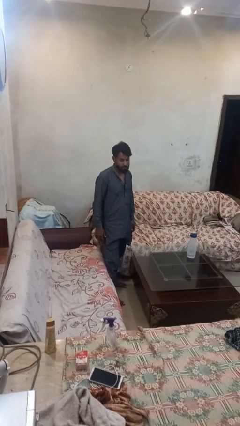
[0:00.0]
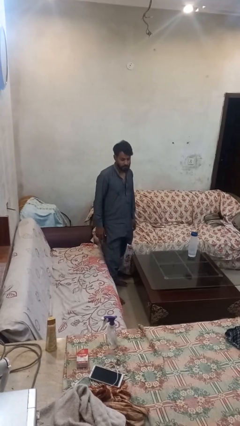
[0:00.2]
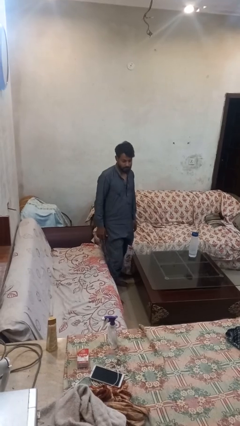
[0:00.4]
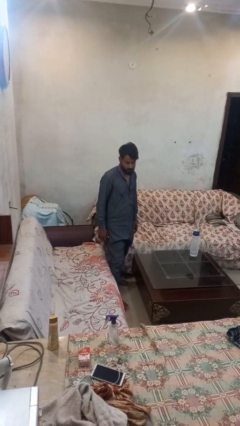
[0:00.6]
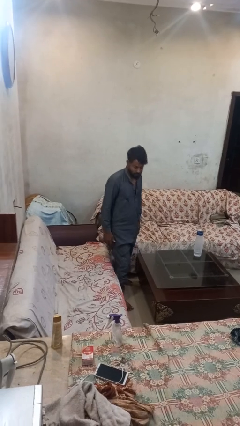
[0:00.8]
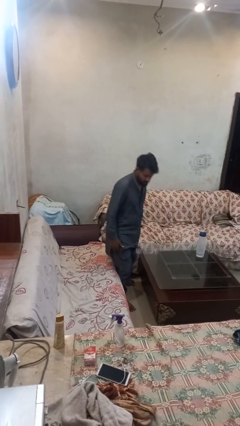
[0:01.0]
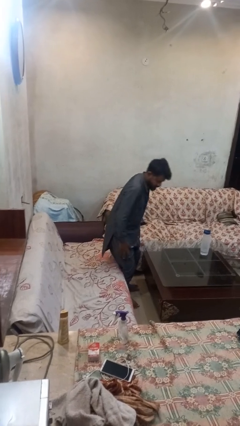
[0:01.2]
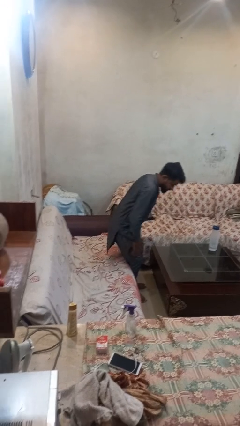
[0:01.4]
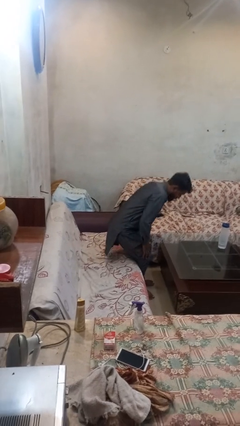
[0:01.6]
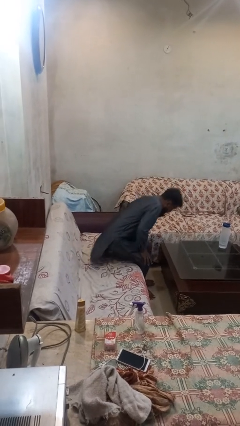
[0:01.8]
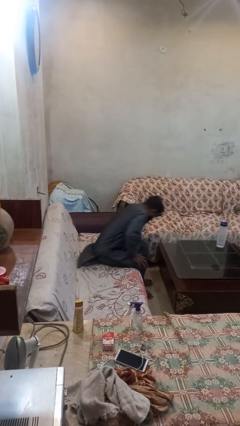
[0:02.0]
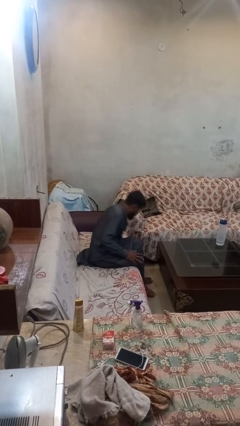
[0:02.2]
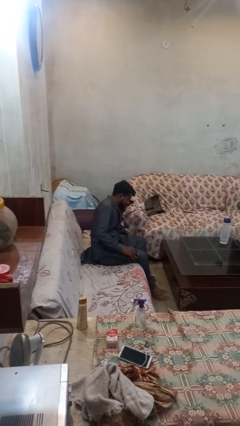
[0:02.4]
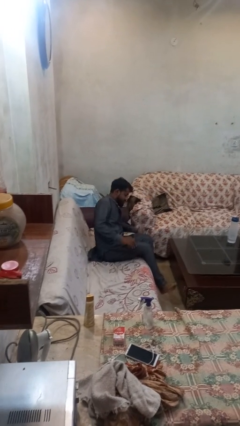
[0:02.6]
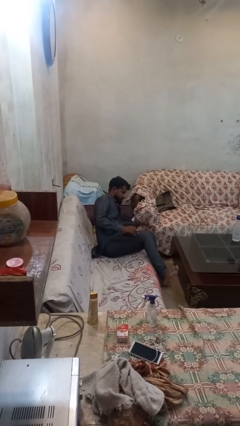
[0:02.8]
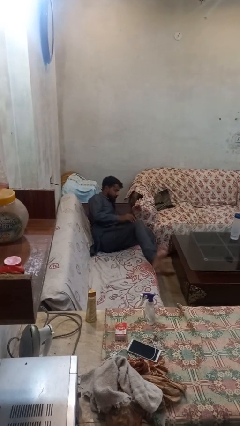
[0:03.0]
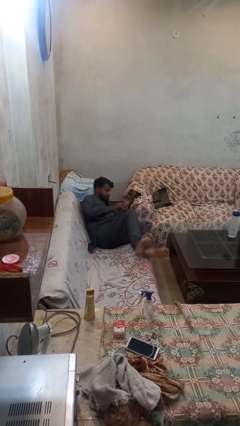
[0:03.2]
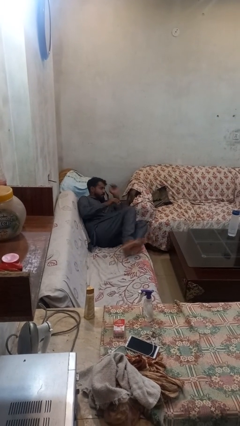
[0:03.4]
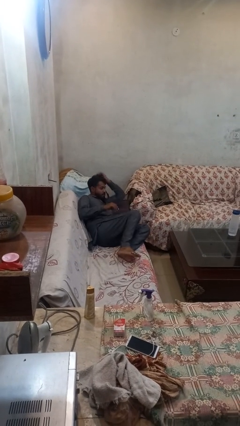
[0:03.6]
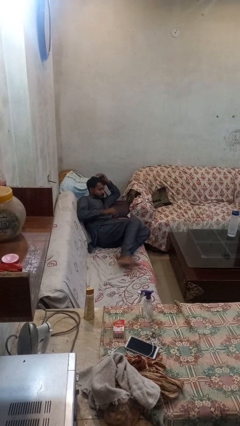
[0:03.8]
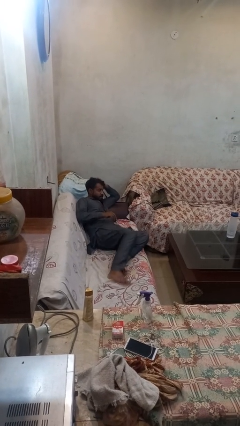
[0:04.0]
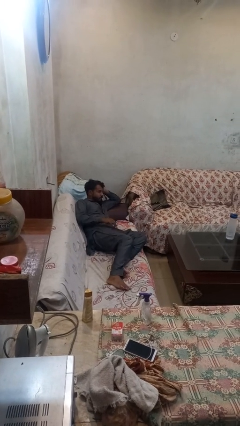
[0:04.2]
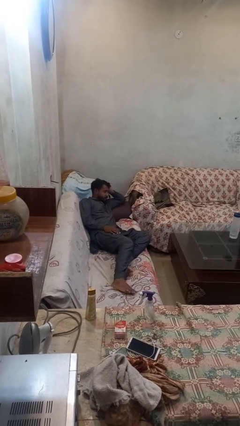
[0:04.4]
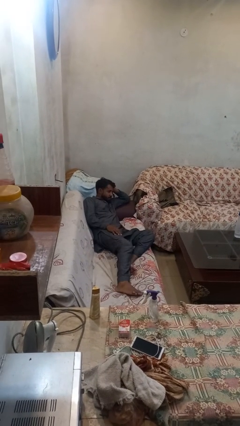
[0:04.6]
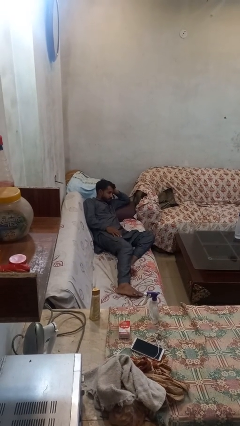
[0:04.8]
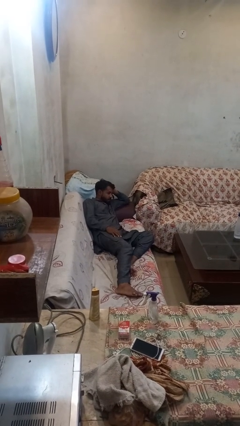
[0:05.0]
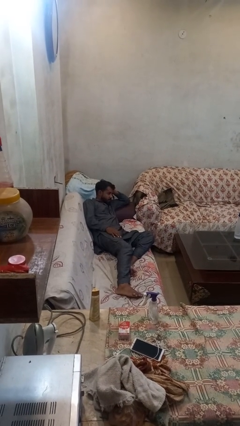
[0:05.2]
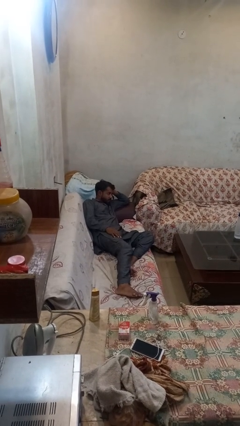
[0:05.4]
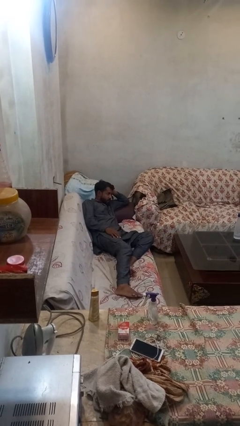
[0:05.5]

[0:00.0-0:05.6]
person lies down on couch

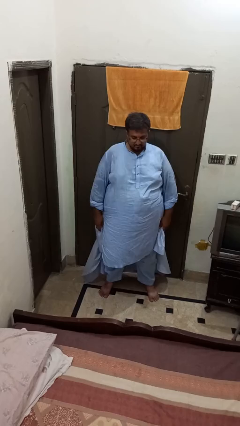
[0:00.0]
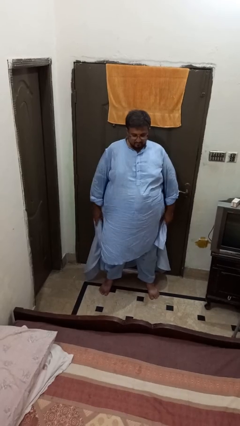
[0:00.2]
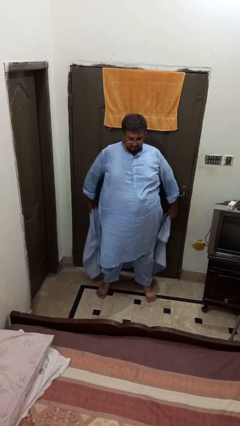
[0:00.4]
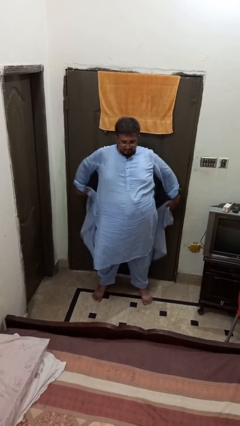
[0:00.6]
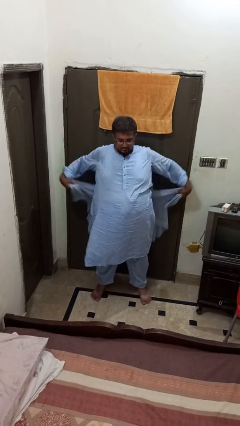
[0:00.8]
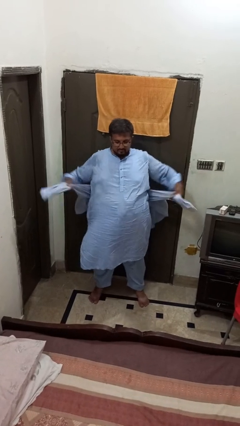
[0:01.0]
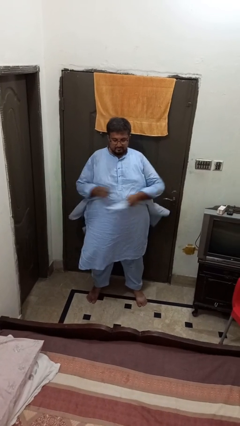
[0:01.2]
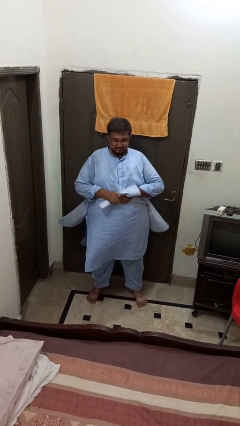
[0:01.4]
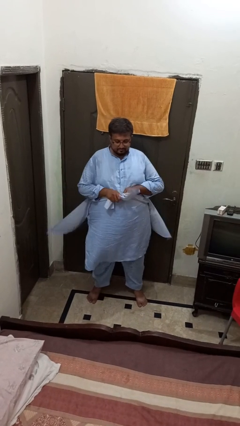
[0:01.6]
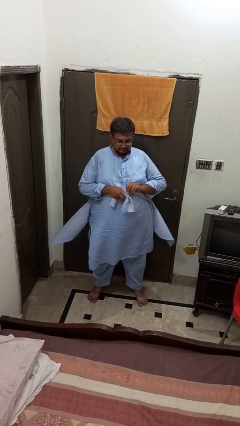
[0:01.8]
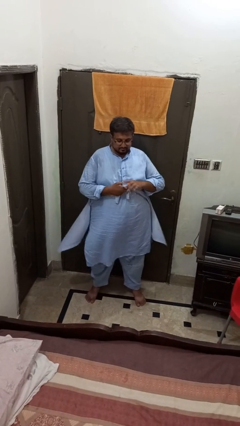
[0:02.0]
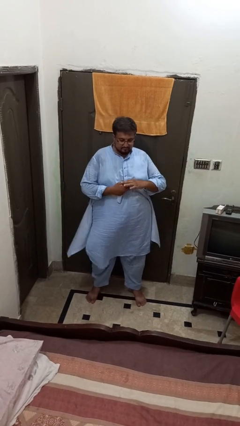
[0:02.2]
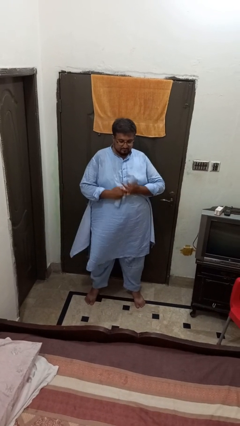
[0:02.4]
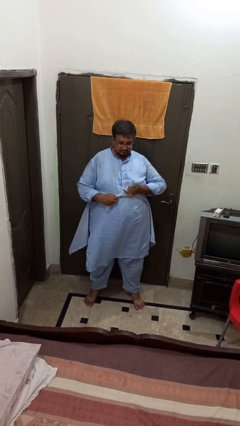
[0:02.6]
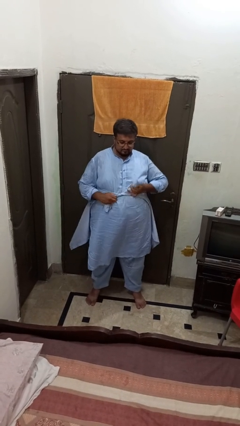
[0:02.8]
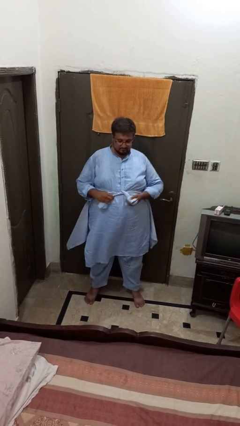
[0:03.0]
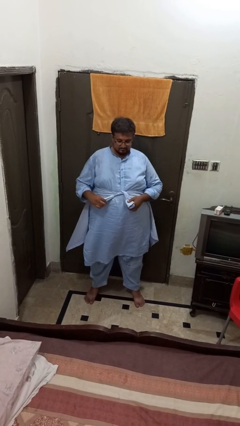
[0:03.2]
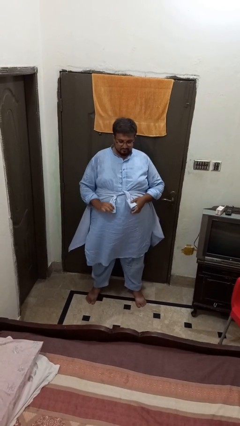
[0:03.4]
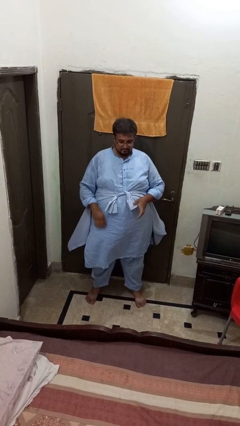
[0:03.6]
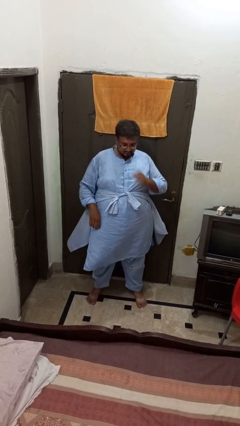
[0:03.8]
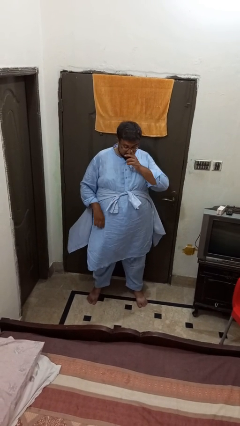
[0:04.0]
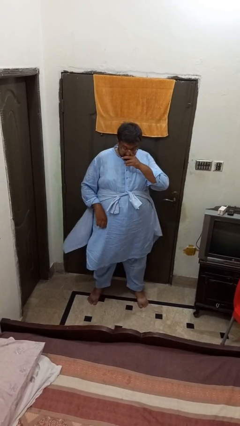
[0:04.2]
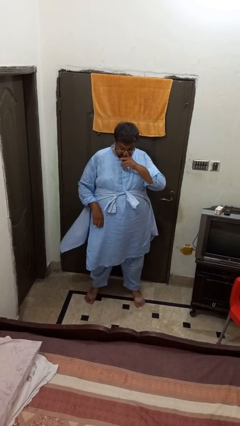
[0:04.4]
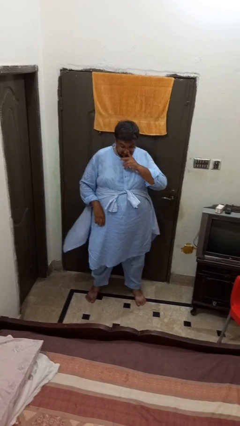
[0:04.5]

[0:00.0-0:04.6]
person ties jacket around waist

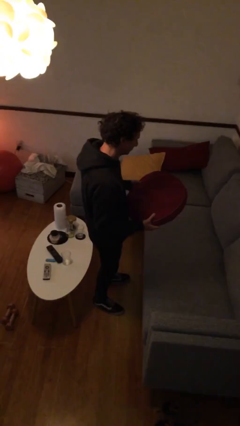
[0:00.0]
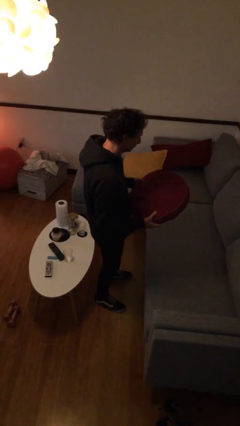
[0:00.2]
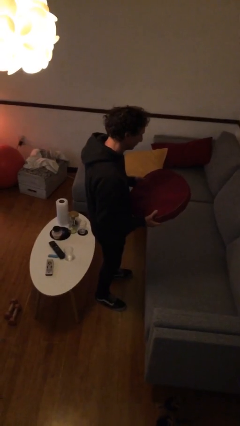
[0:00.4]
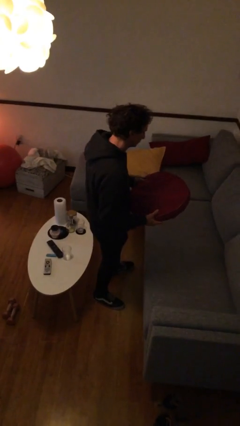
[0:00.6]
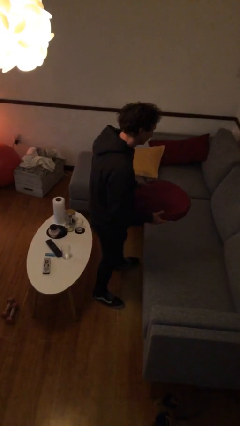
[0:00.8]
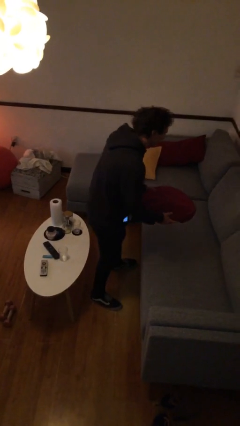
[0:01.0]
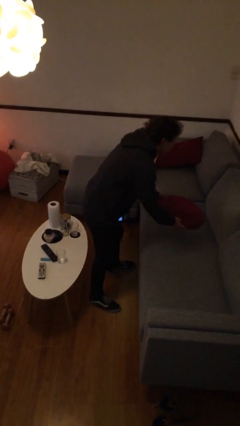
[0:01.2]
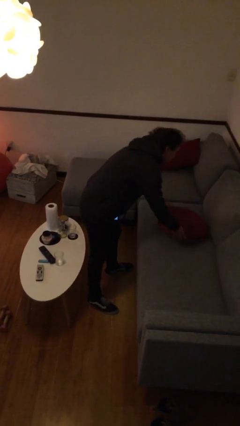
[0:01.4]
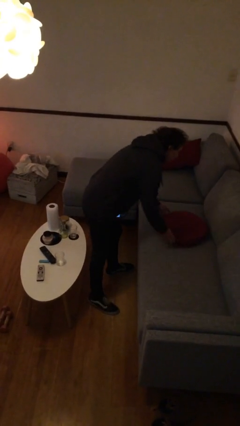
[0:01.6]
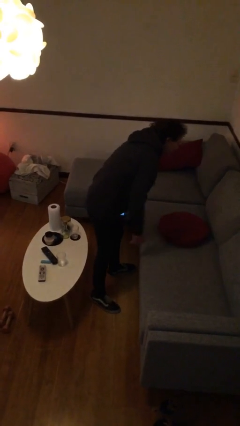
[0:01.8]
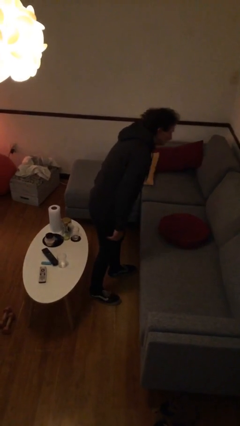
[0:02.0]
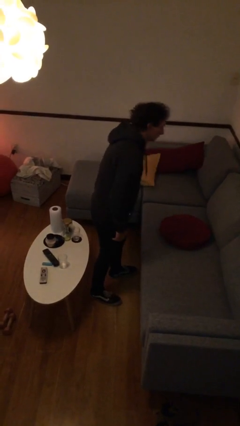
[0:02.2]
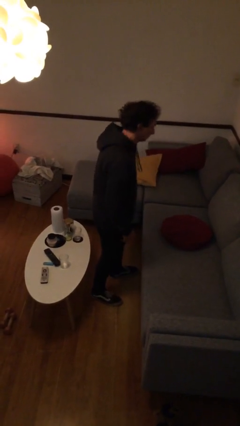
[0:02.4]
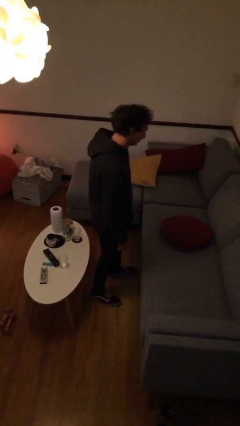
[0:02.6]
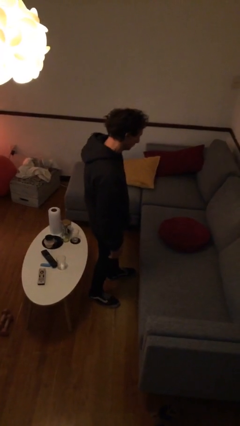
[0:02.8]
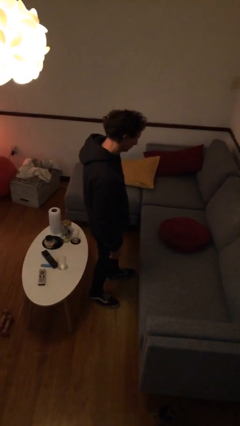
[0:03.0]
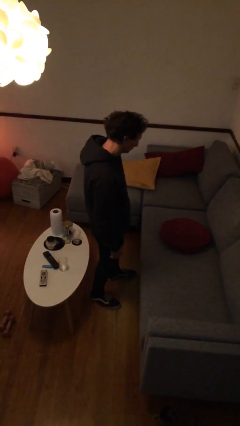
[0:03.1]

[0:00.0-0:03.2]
person puts down object on couch

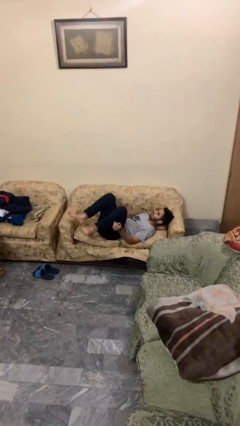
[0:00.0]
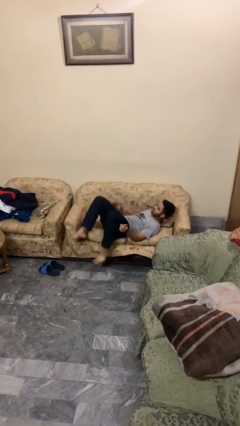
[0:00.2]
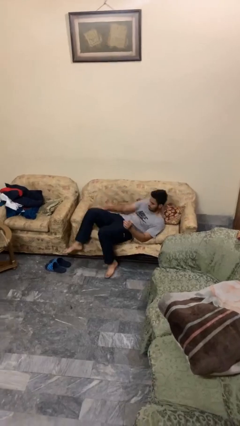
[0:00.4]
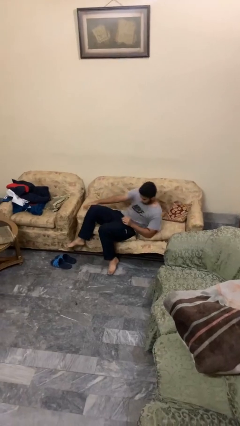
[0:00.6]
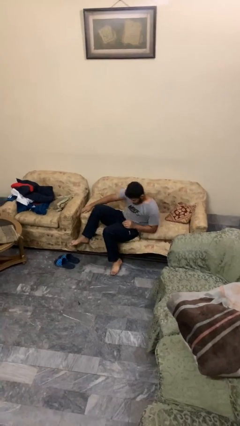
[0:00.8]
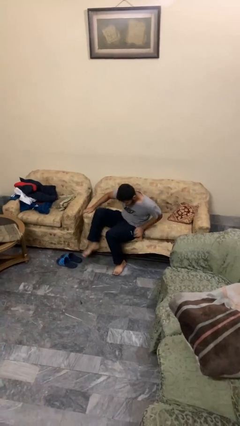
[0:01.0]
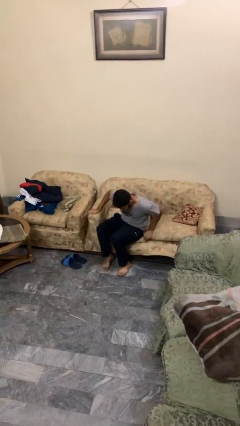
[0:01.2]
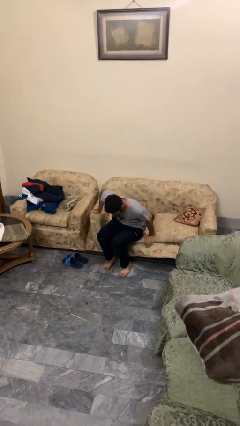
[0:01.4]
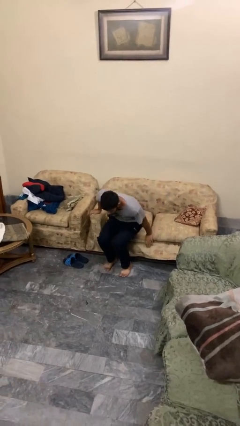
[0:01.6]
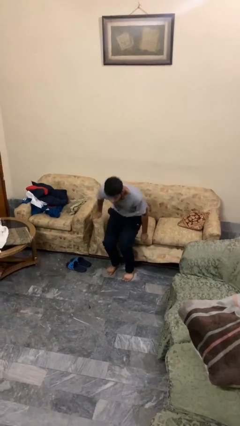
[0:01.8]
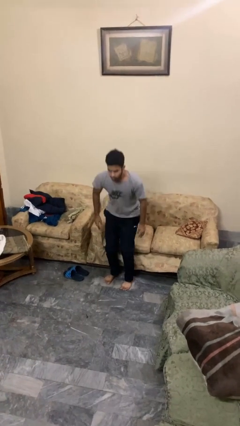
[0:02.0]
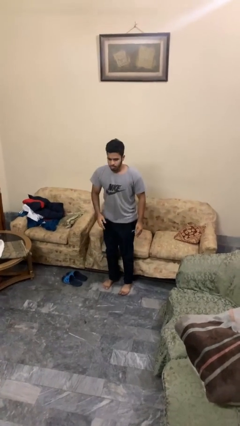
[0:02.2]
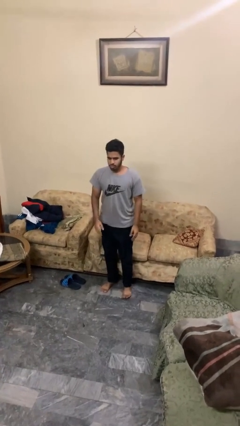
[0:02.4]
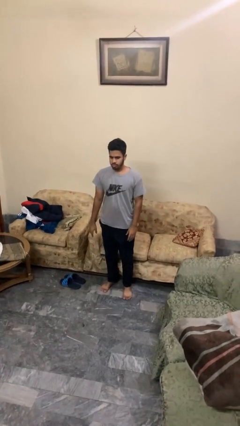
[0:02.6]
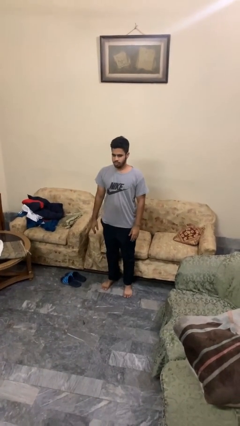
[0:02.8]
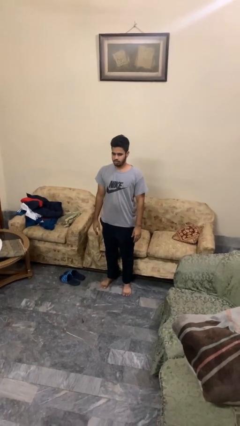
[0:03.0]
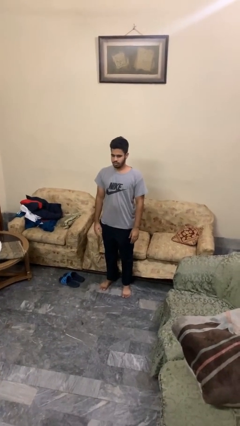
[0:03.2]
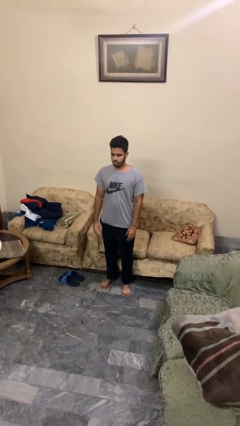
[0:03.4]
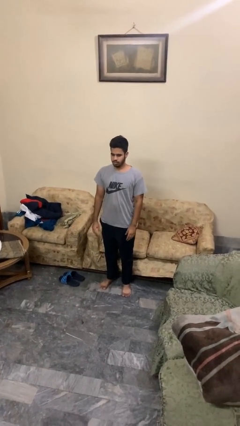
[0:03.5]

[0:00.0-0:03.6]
person stands up

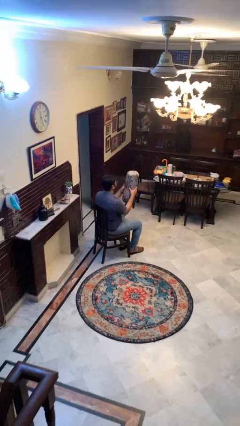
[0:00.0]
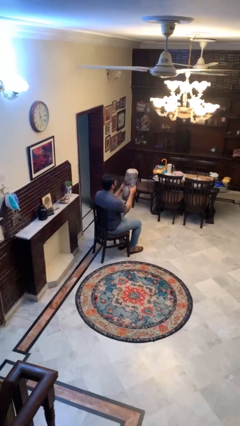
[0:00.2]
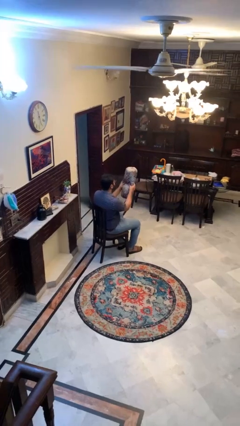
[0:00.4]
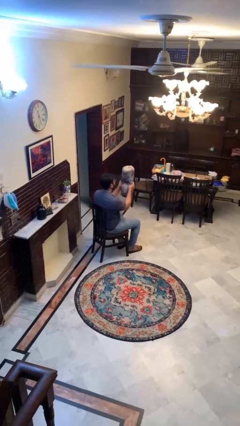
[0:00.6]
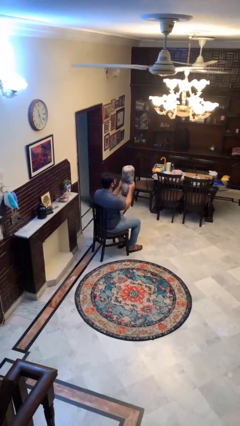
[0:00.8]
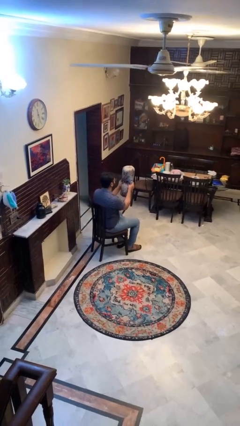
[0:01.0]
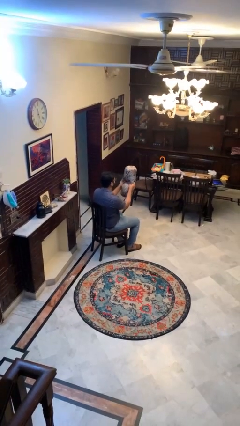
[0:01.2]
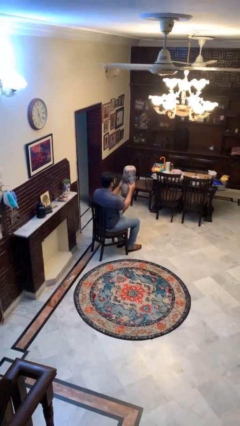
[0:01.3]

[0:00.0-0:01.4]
person squeezes object
